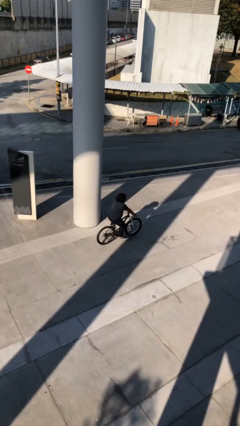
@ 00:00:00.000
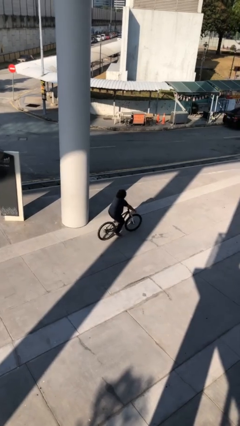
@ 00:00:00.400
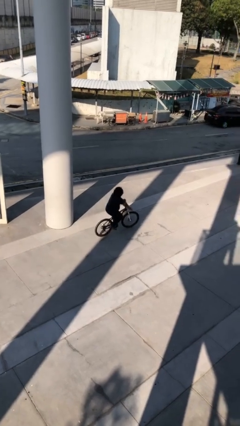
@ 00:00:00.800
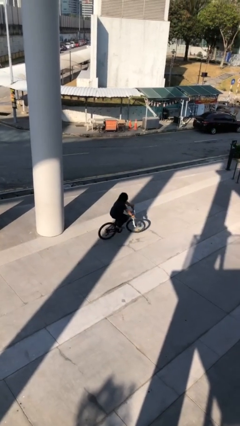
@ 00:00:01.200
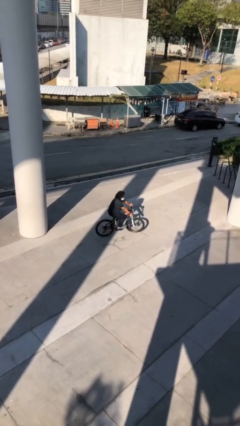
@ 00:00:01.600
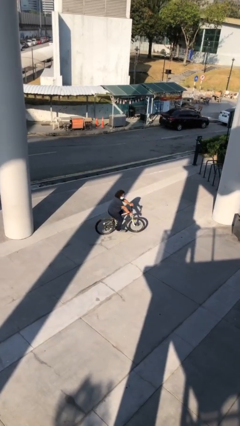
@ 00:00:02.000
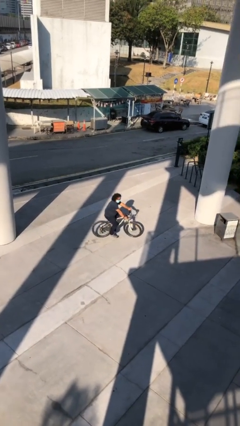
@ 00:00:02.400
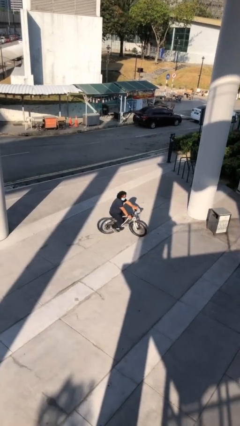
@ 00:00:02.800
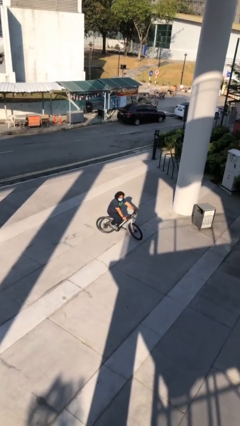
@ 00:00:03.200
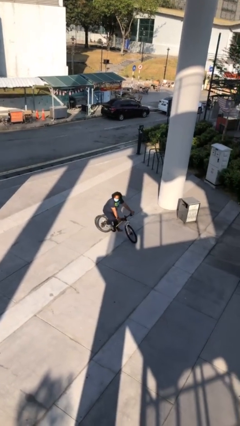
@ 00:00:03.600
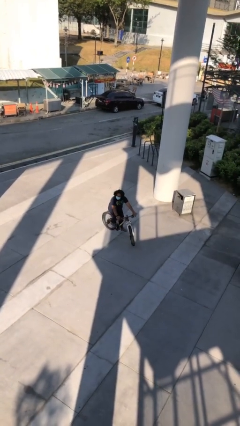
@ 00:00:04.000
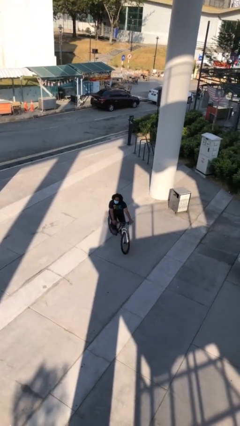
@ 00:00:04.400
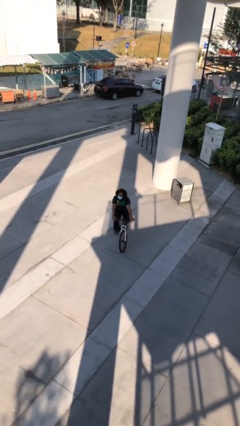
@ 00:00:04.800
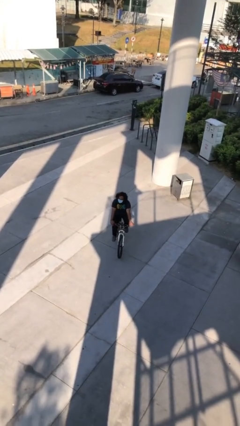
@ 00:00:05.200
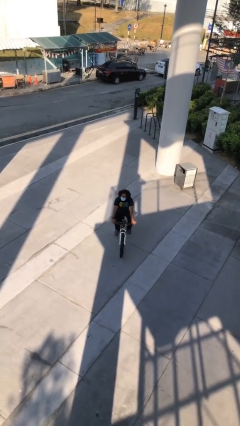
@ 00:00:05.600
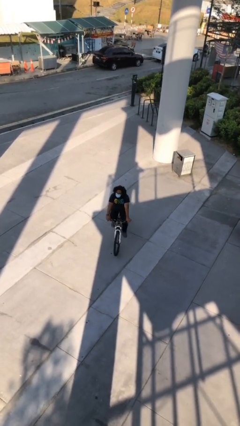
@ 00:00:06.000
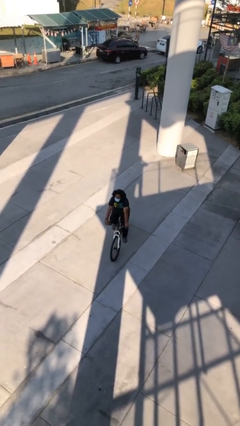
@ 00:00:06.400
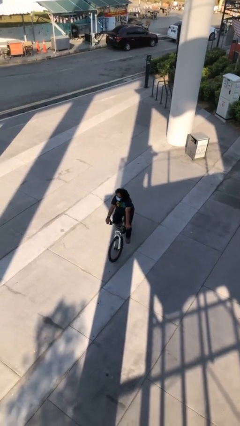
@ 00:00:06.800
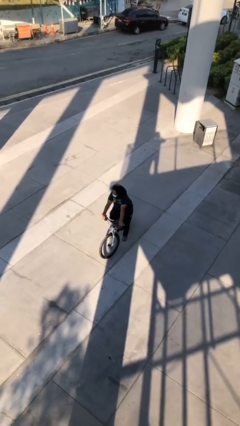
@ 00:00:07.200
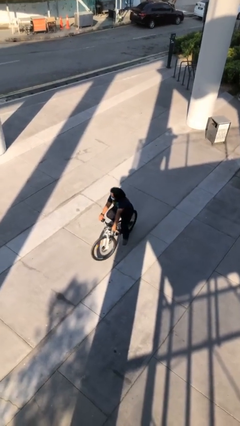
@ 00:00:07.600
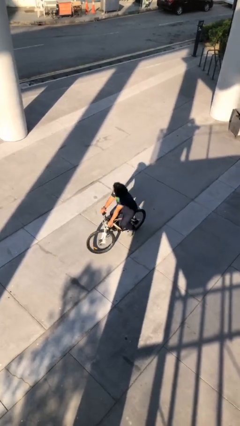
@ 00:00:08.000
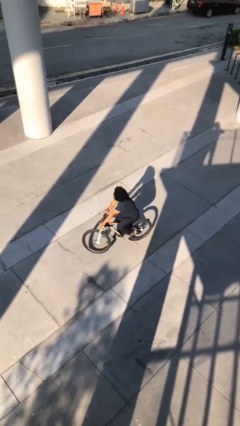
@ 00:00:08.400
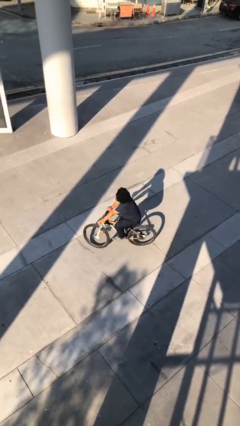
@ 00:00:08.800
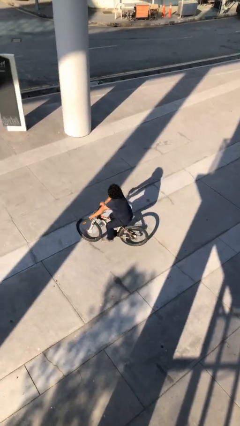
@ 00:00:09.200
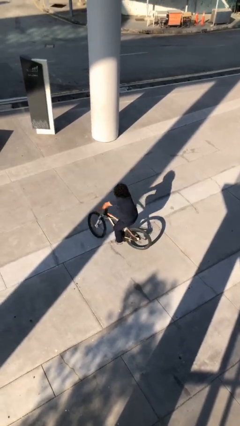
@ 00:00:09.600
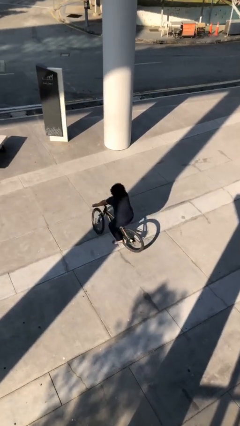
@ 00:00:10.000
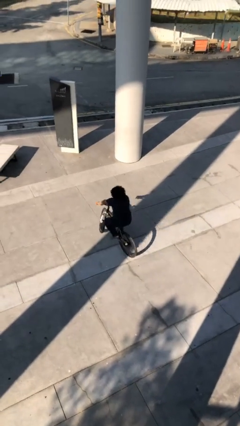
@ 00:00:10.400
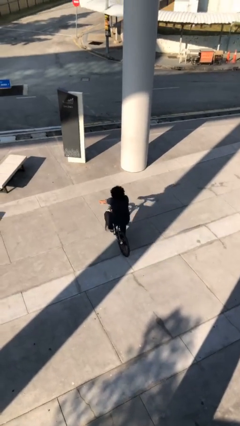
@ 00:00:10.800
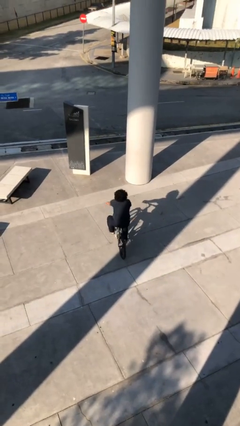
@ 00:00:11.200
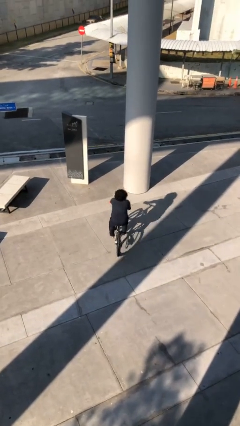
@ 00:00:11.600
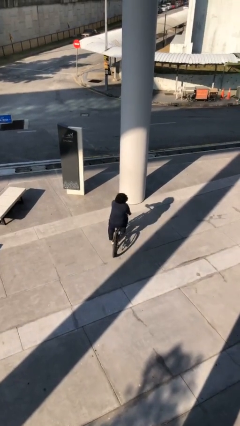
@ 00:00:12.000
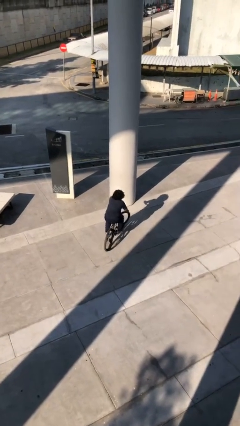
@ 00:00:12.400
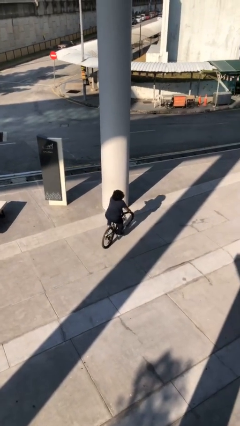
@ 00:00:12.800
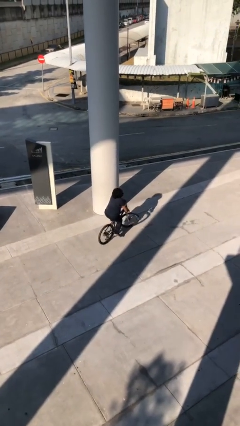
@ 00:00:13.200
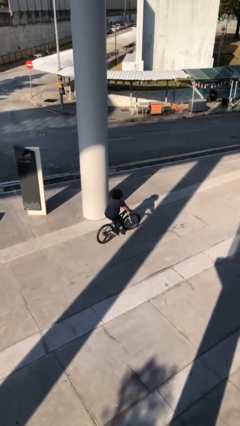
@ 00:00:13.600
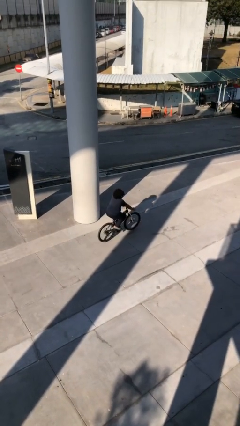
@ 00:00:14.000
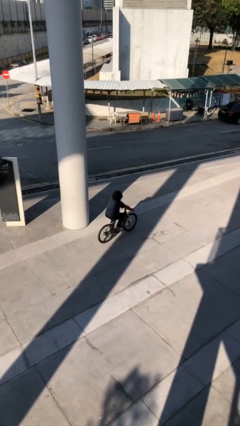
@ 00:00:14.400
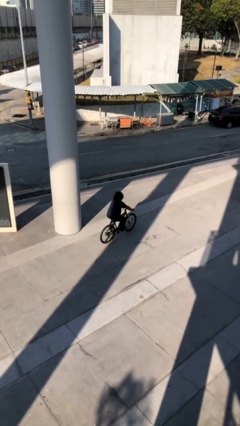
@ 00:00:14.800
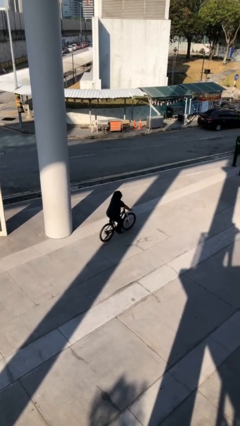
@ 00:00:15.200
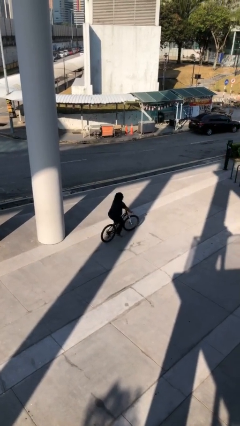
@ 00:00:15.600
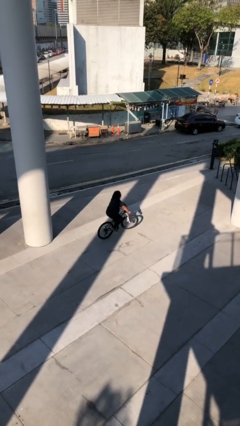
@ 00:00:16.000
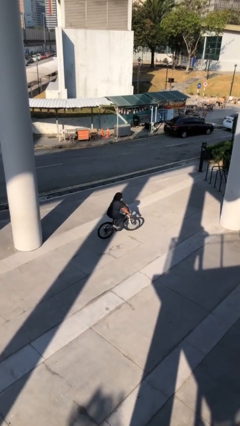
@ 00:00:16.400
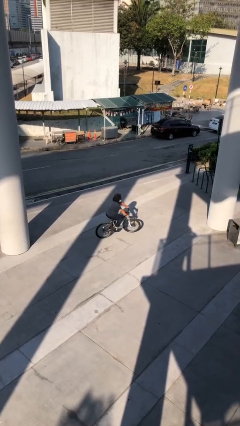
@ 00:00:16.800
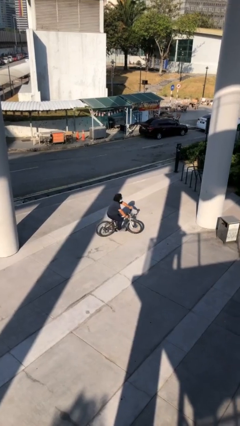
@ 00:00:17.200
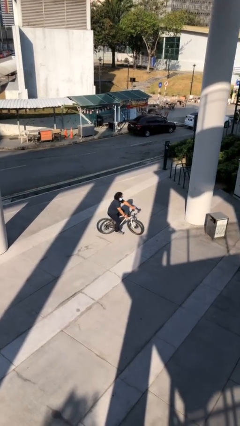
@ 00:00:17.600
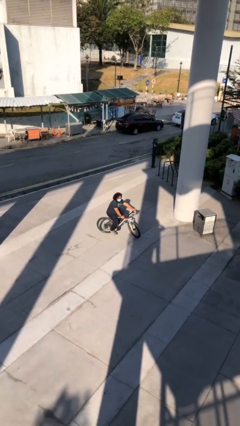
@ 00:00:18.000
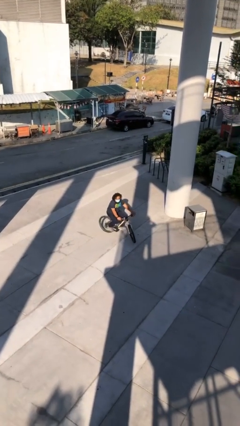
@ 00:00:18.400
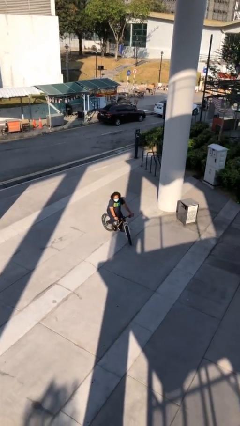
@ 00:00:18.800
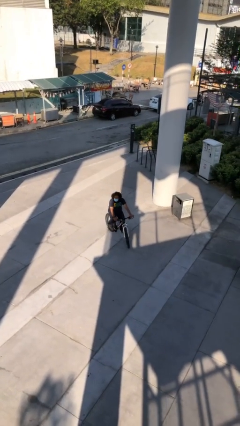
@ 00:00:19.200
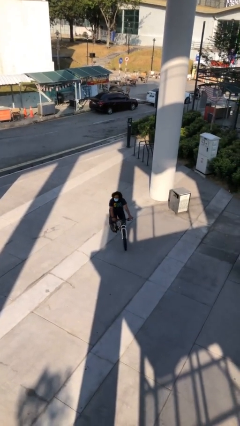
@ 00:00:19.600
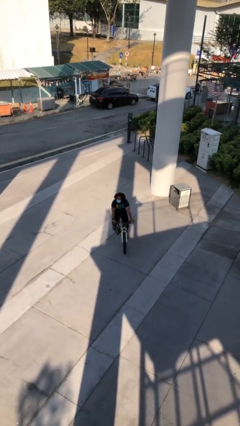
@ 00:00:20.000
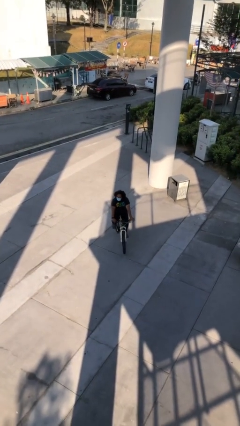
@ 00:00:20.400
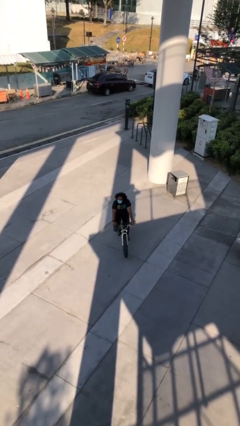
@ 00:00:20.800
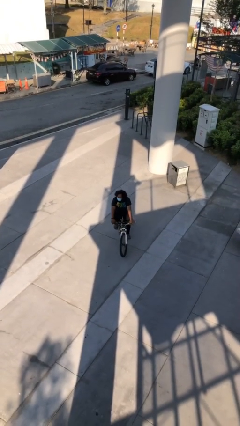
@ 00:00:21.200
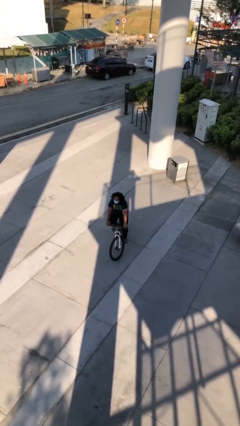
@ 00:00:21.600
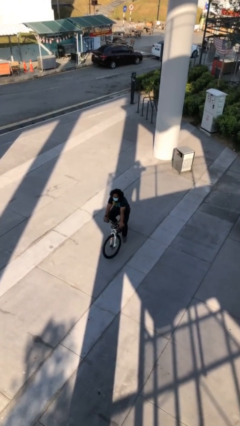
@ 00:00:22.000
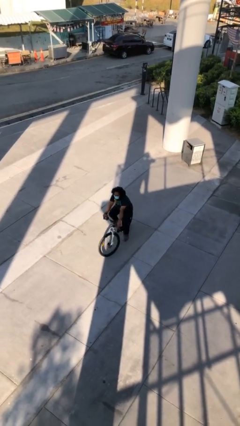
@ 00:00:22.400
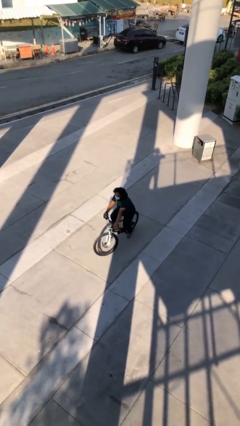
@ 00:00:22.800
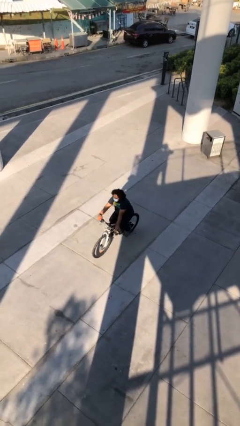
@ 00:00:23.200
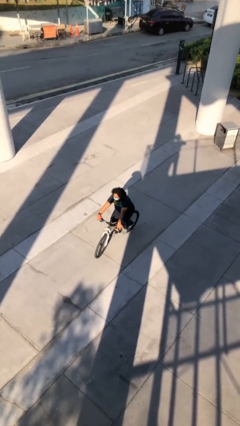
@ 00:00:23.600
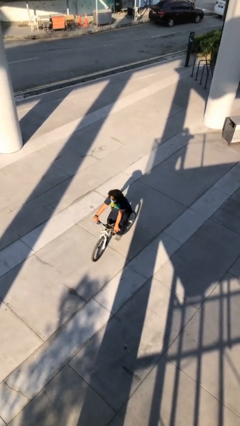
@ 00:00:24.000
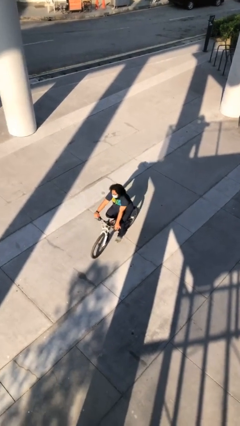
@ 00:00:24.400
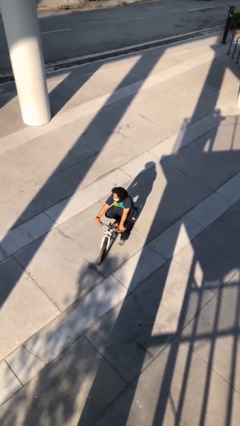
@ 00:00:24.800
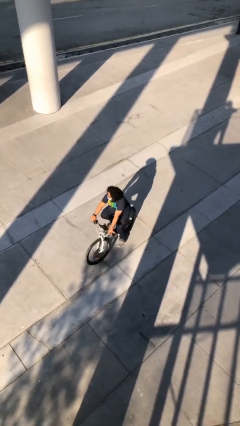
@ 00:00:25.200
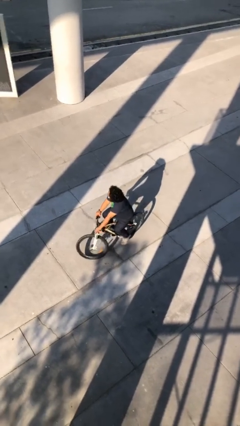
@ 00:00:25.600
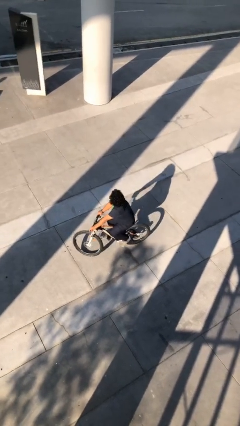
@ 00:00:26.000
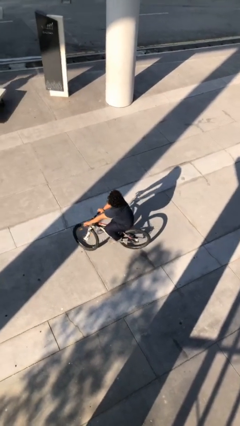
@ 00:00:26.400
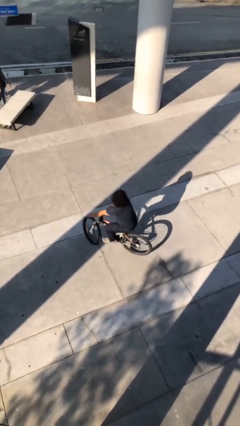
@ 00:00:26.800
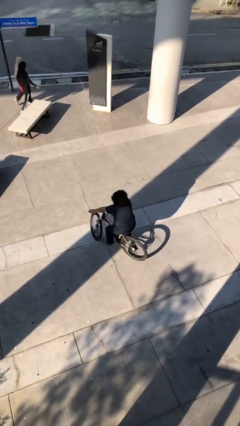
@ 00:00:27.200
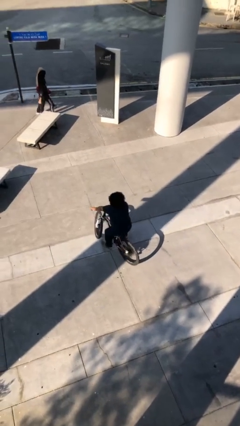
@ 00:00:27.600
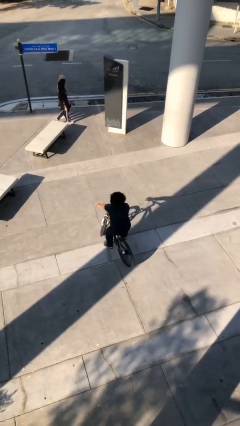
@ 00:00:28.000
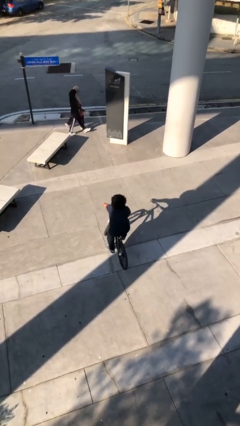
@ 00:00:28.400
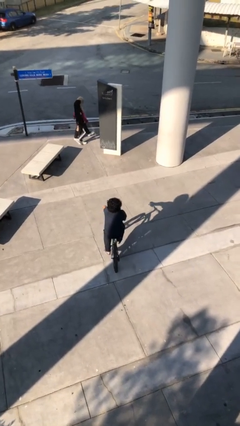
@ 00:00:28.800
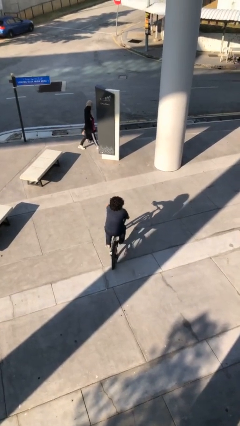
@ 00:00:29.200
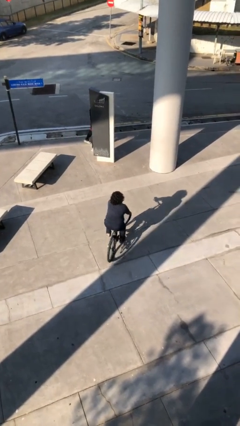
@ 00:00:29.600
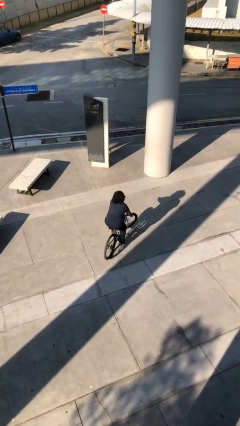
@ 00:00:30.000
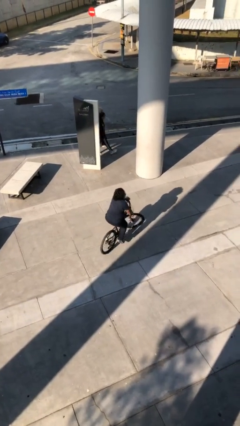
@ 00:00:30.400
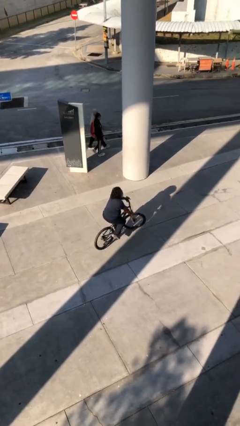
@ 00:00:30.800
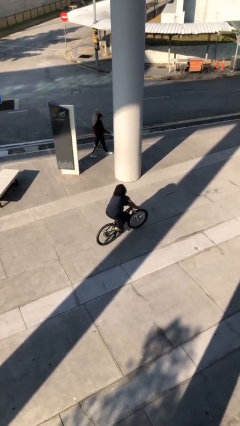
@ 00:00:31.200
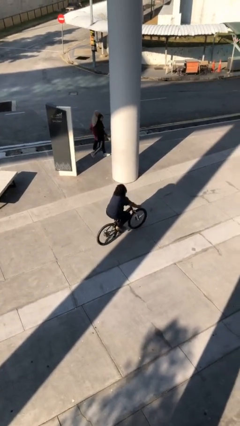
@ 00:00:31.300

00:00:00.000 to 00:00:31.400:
person rides bicycle

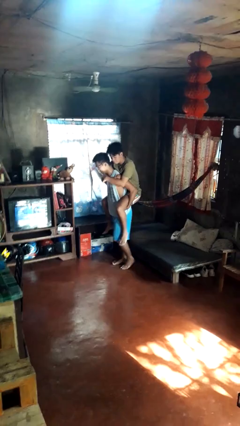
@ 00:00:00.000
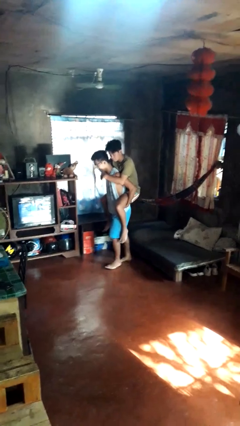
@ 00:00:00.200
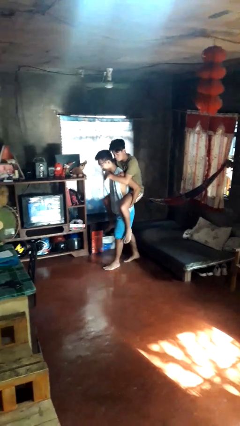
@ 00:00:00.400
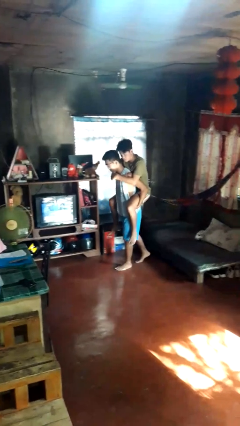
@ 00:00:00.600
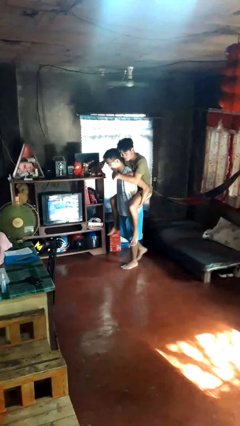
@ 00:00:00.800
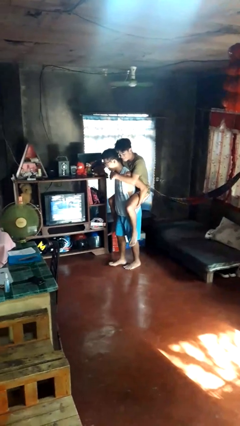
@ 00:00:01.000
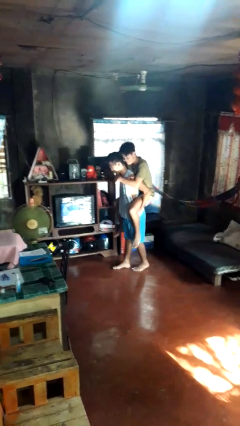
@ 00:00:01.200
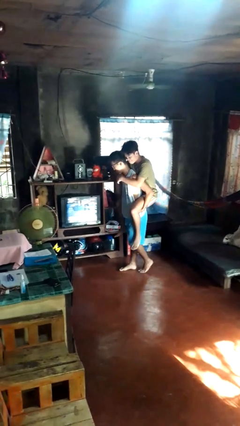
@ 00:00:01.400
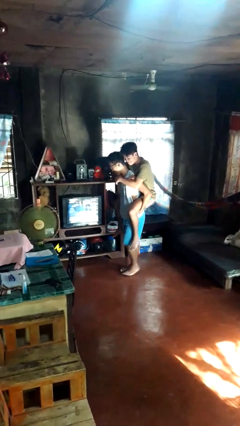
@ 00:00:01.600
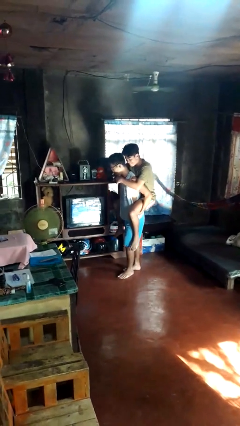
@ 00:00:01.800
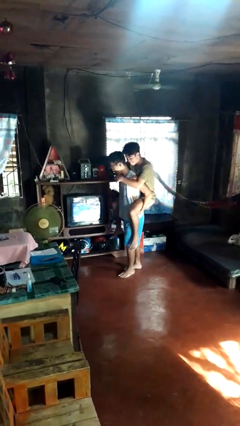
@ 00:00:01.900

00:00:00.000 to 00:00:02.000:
person carries person on back

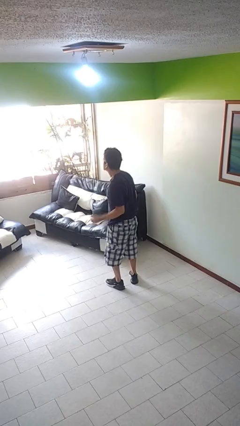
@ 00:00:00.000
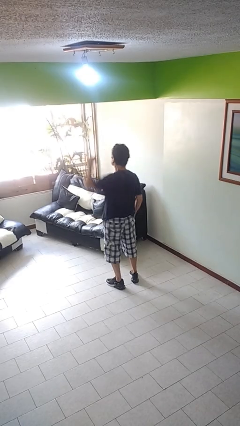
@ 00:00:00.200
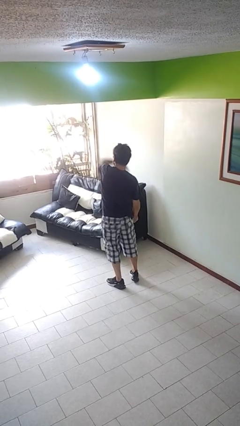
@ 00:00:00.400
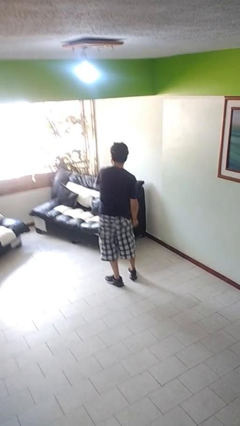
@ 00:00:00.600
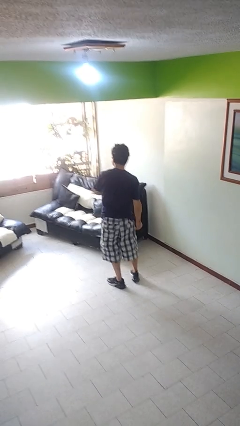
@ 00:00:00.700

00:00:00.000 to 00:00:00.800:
person punches
